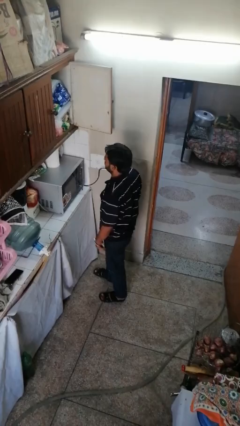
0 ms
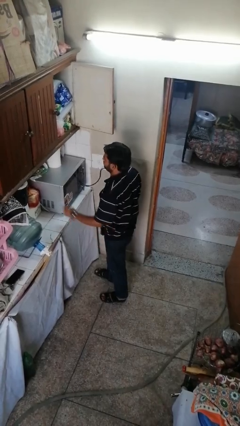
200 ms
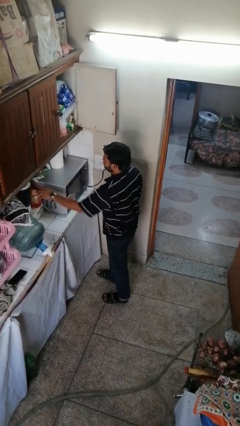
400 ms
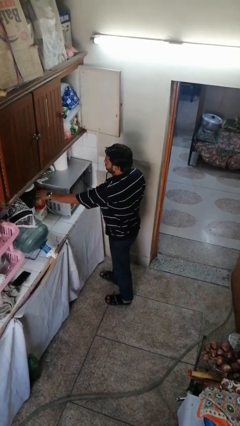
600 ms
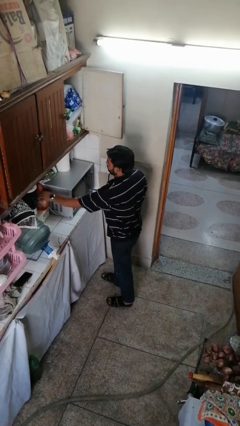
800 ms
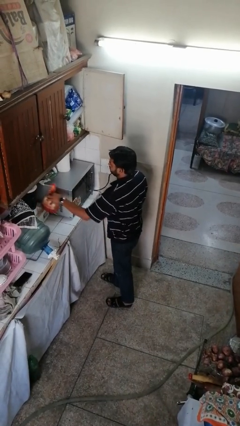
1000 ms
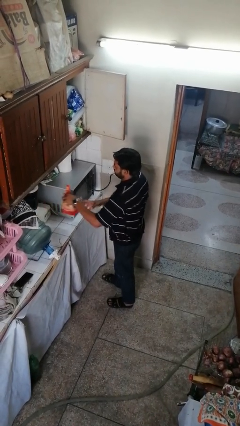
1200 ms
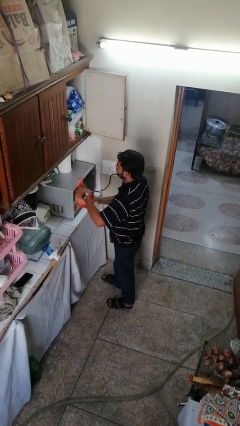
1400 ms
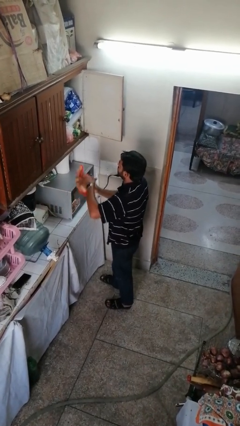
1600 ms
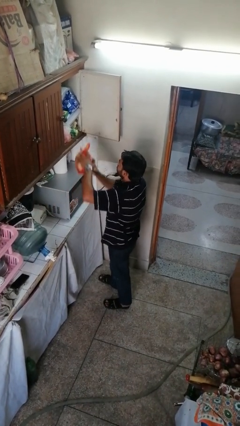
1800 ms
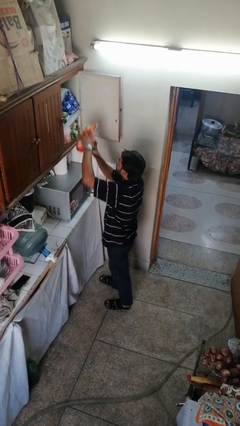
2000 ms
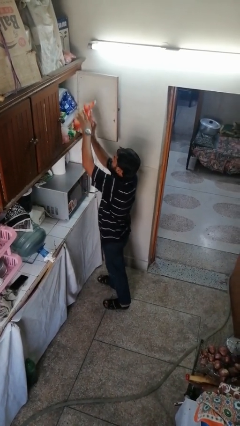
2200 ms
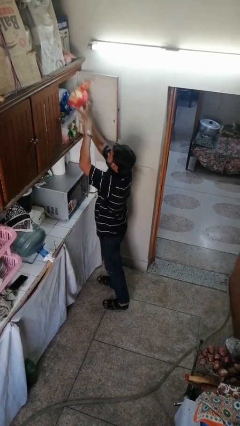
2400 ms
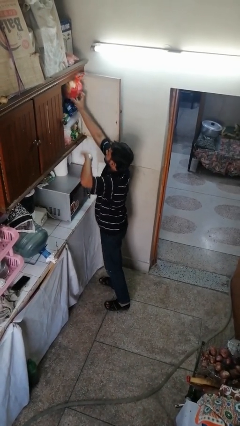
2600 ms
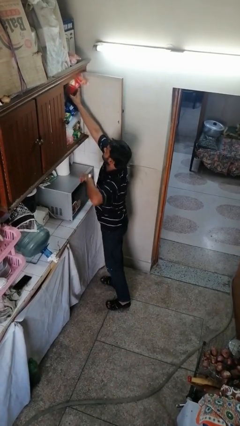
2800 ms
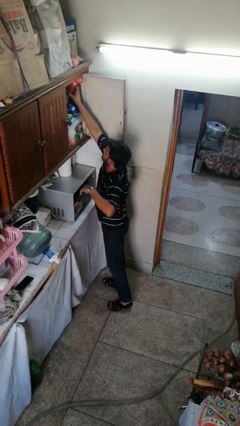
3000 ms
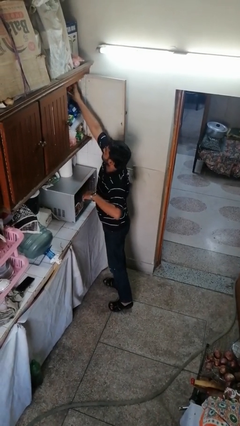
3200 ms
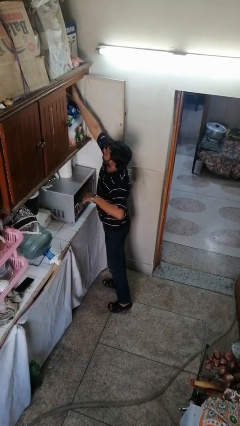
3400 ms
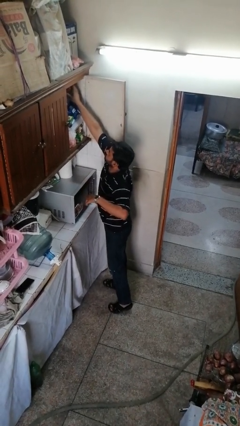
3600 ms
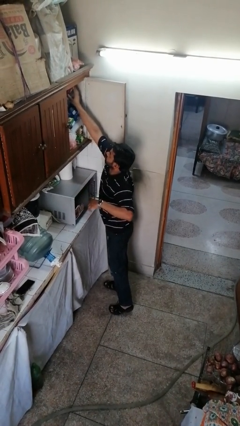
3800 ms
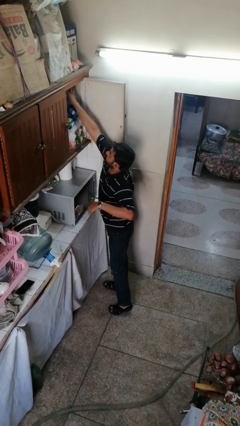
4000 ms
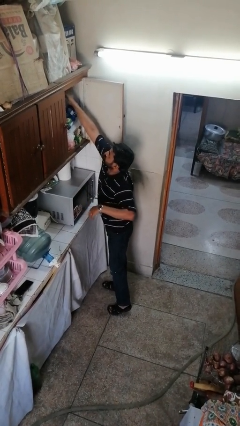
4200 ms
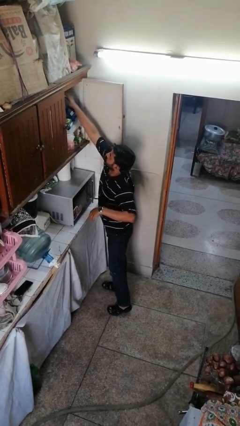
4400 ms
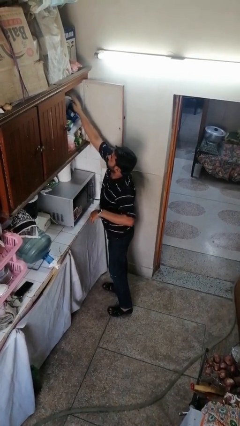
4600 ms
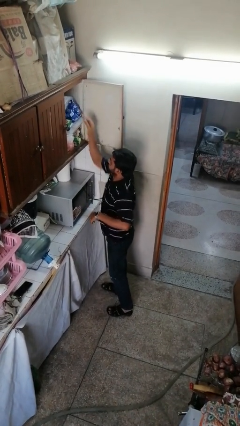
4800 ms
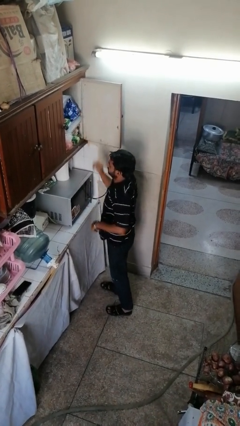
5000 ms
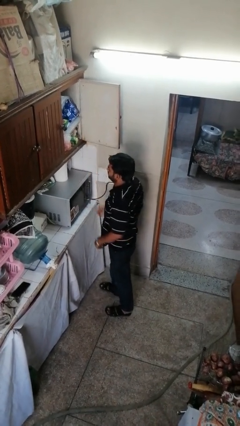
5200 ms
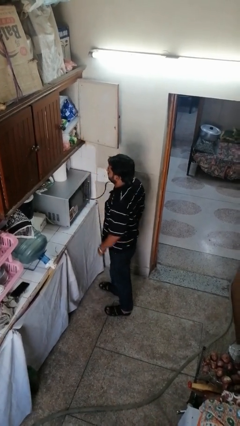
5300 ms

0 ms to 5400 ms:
person loads groceries into cabinet

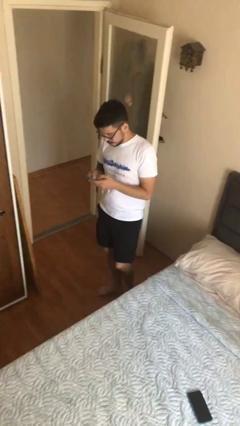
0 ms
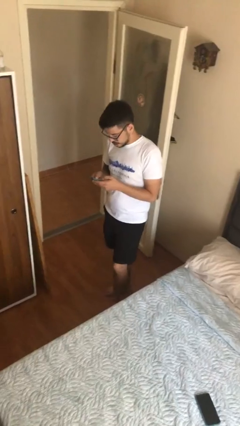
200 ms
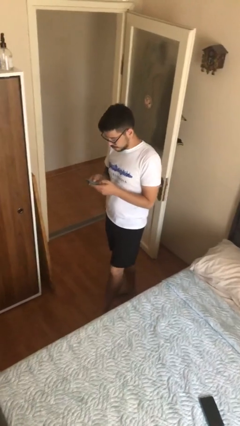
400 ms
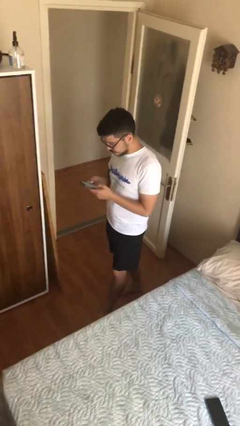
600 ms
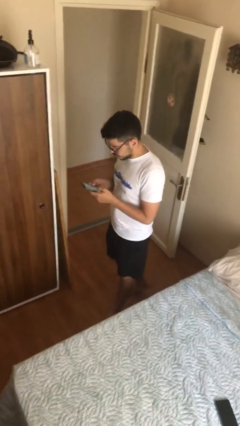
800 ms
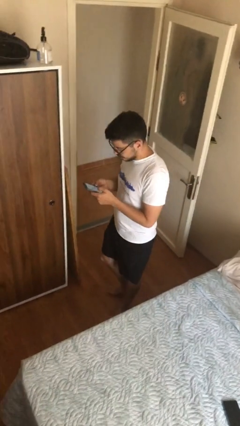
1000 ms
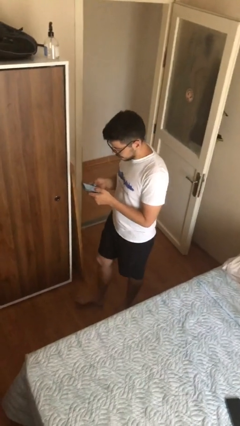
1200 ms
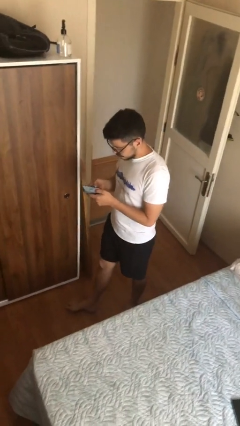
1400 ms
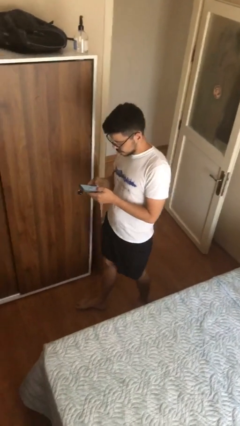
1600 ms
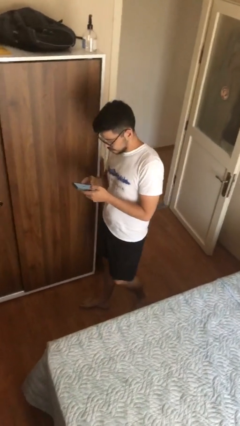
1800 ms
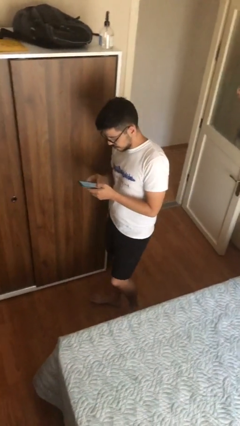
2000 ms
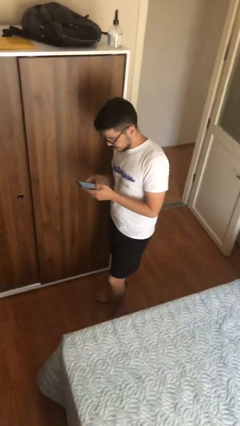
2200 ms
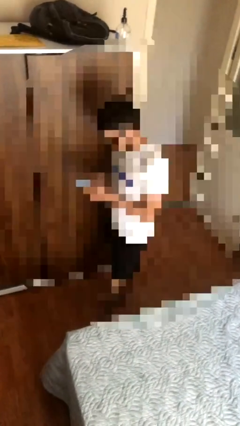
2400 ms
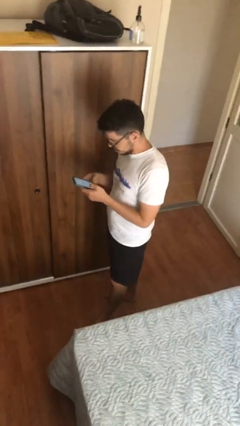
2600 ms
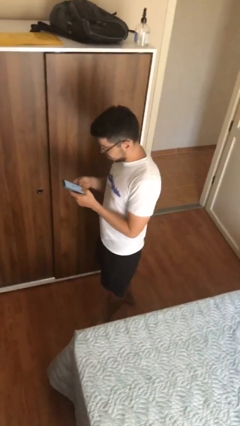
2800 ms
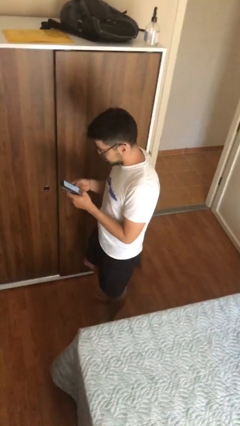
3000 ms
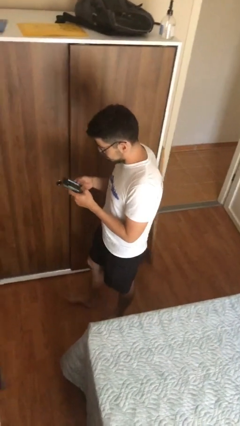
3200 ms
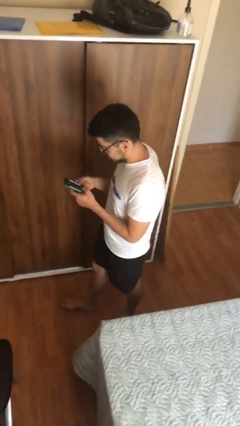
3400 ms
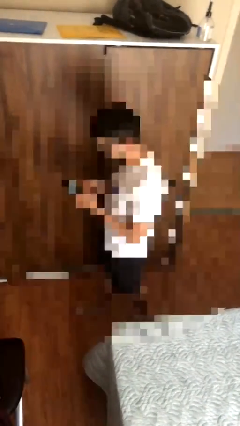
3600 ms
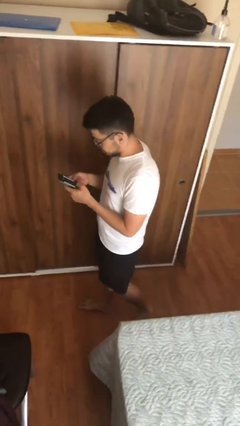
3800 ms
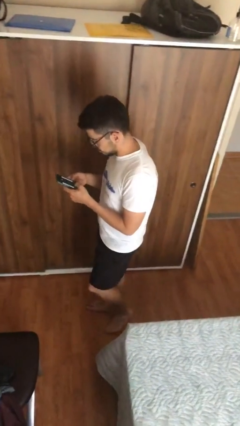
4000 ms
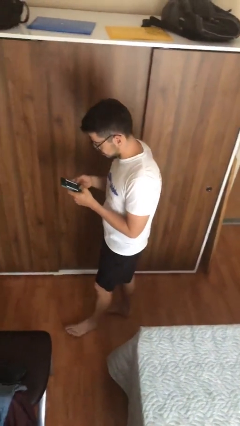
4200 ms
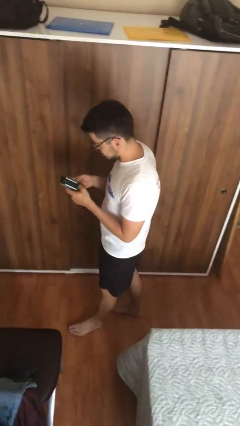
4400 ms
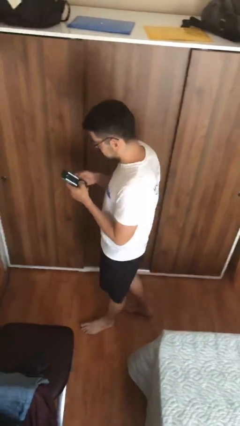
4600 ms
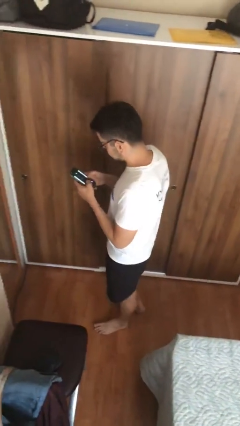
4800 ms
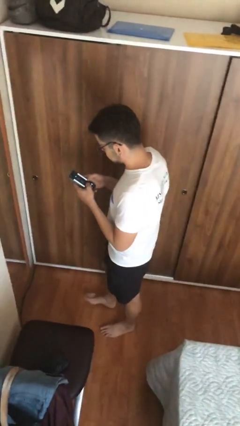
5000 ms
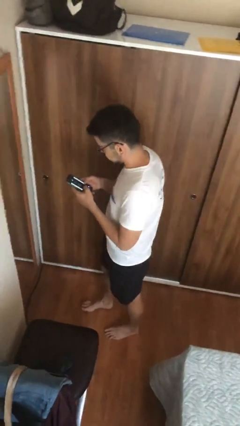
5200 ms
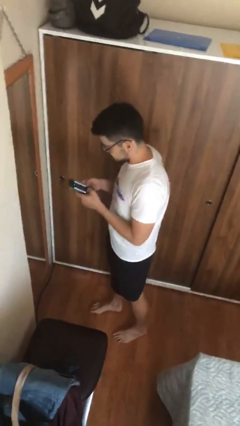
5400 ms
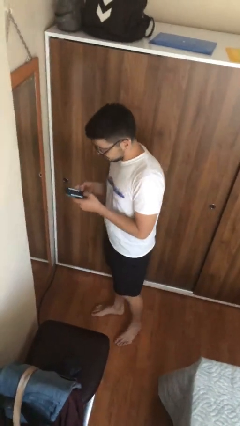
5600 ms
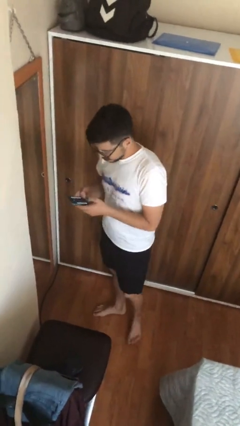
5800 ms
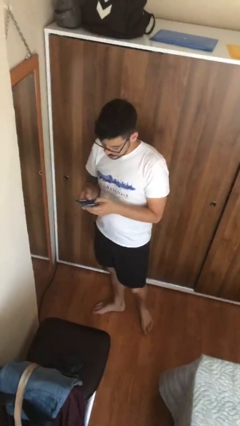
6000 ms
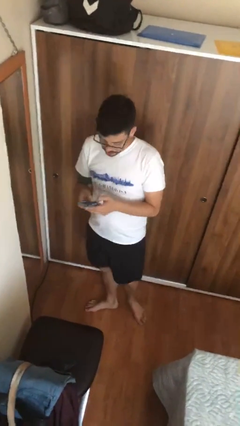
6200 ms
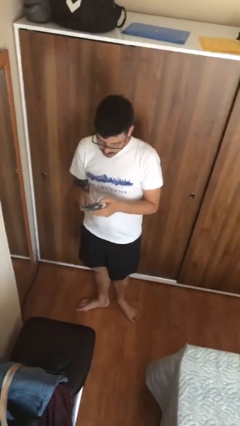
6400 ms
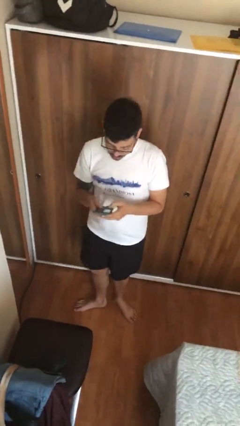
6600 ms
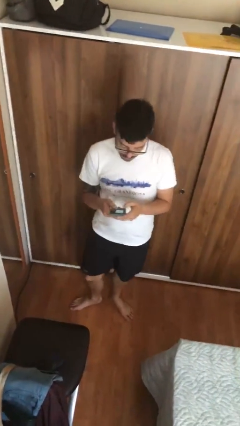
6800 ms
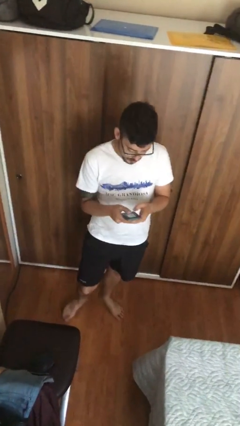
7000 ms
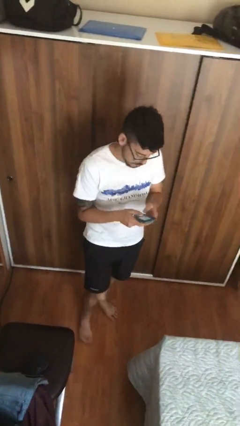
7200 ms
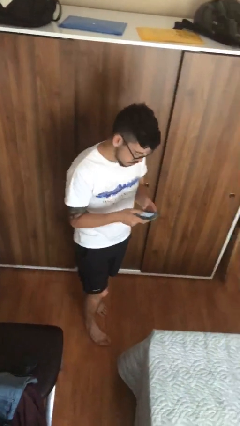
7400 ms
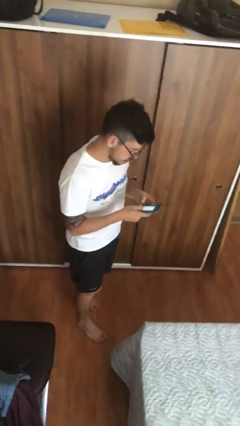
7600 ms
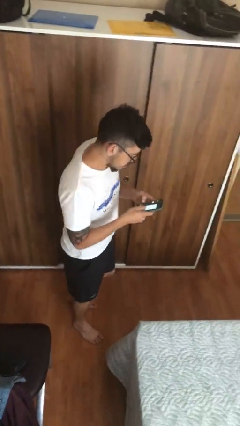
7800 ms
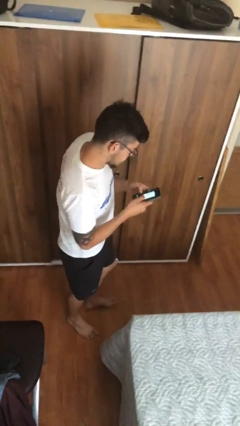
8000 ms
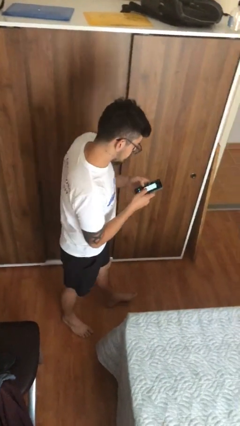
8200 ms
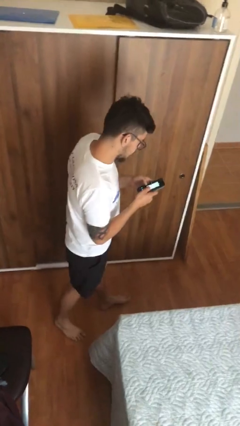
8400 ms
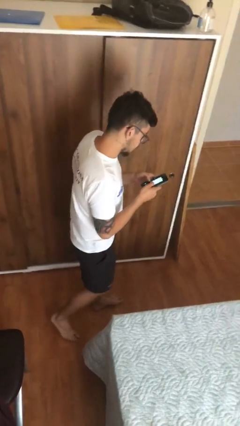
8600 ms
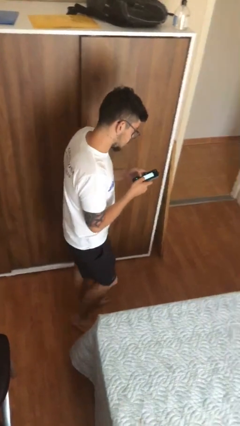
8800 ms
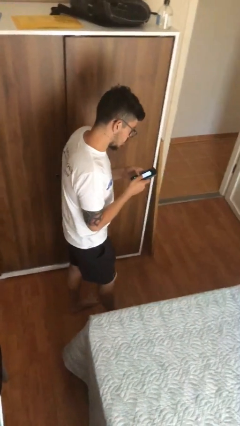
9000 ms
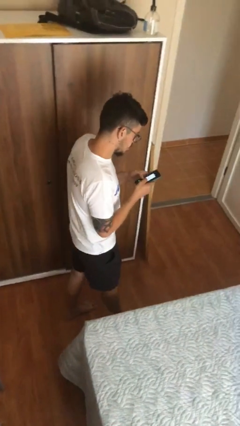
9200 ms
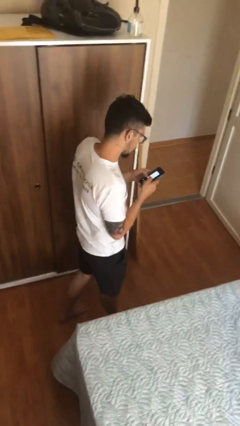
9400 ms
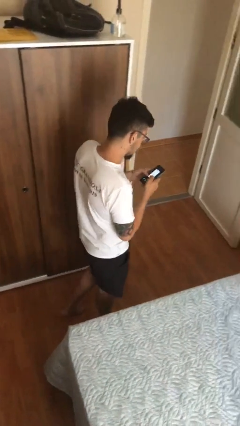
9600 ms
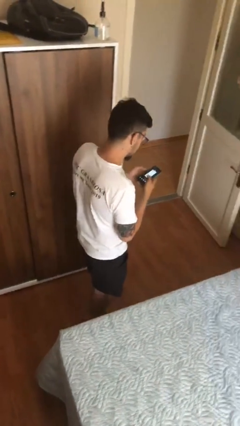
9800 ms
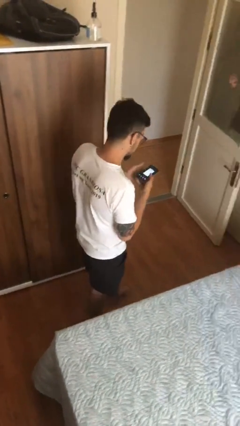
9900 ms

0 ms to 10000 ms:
person texts on phone

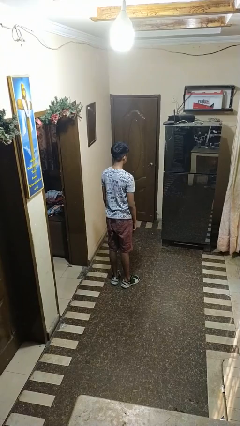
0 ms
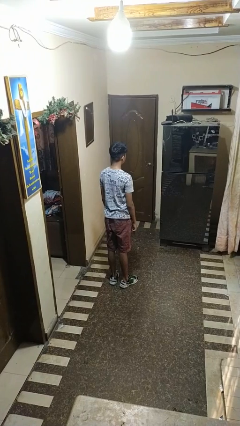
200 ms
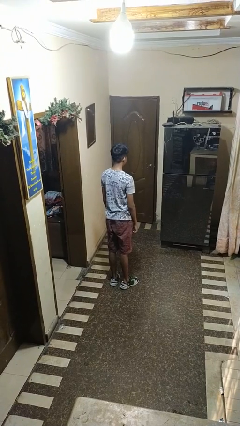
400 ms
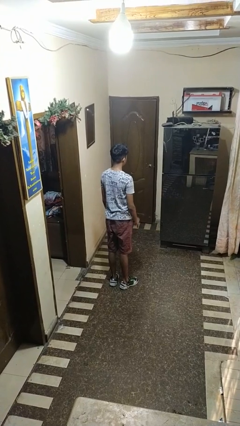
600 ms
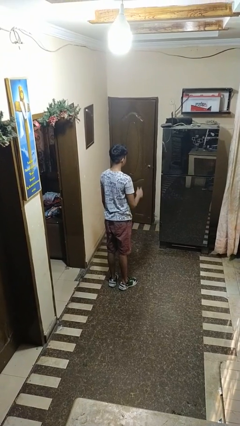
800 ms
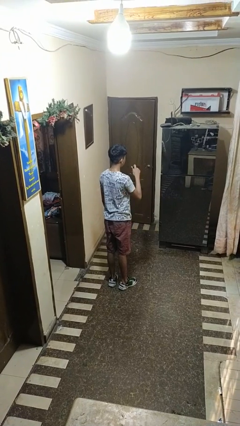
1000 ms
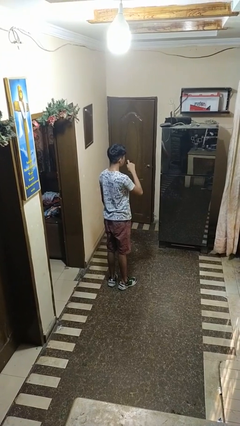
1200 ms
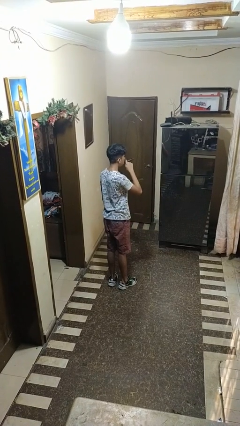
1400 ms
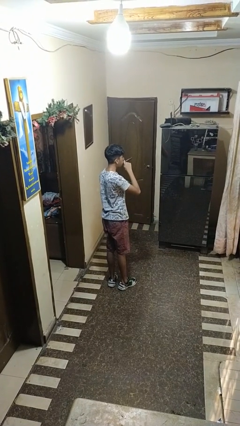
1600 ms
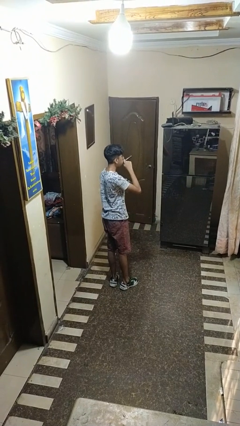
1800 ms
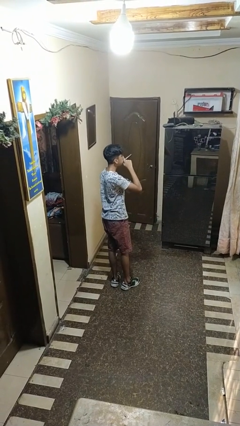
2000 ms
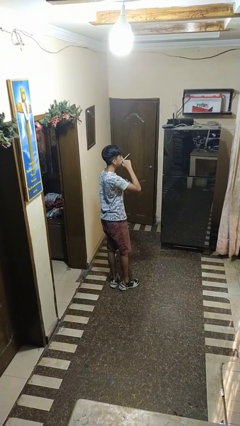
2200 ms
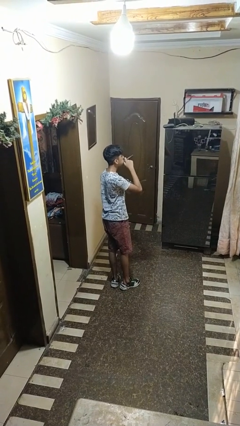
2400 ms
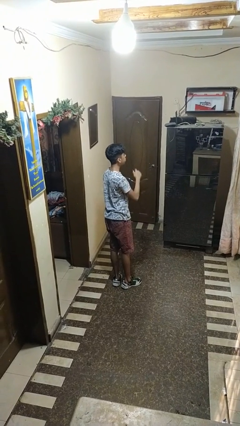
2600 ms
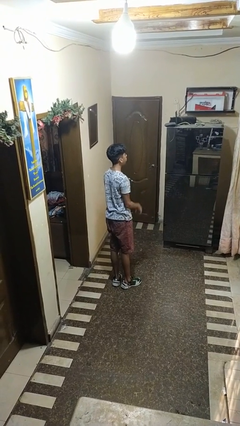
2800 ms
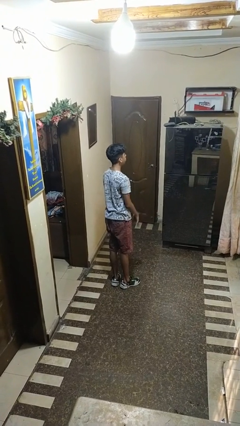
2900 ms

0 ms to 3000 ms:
person vapes
